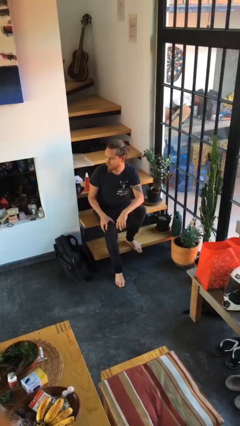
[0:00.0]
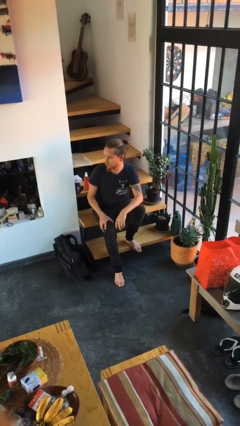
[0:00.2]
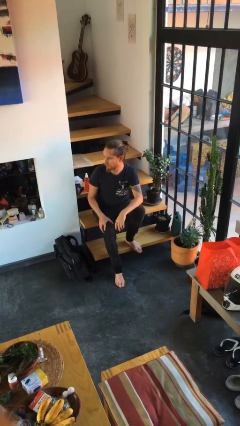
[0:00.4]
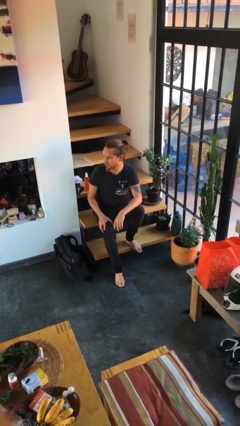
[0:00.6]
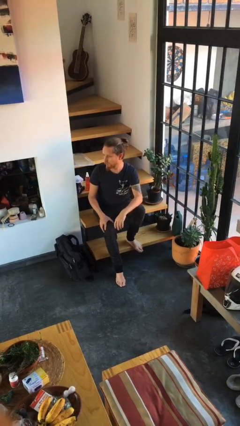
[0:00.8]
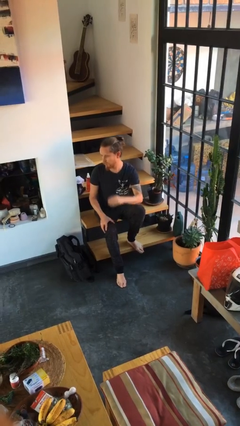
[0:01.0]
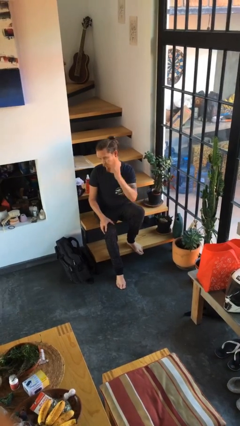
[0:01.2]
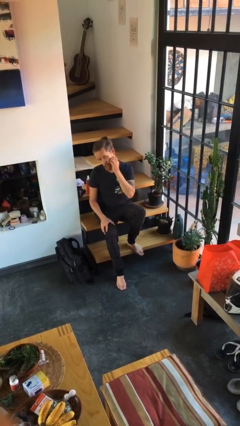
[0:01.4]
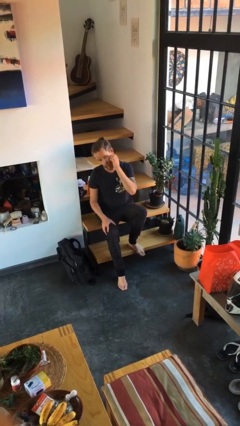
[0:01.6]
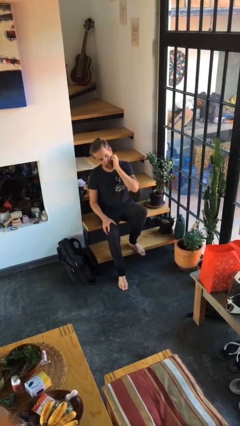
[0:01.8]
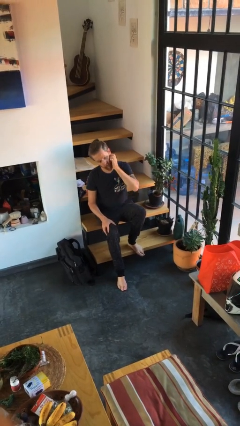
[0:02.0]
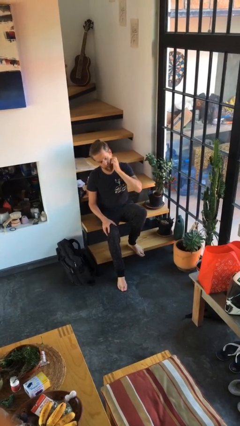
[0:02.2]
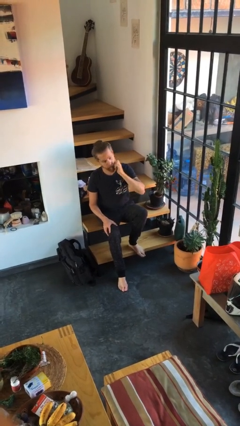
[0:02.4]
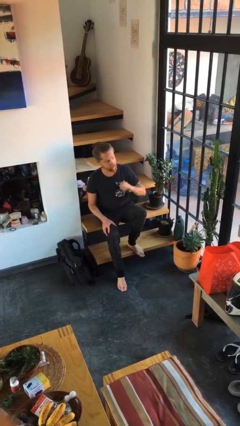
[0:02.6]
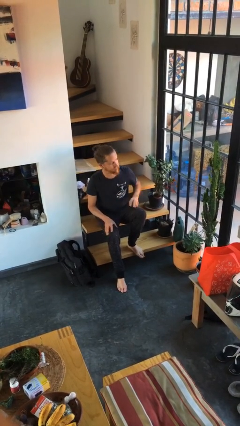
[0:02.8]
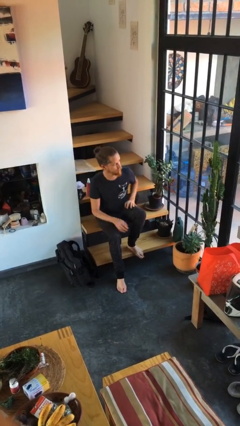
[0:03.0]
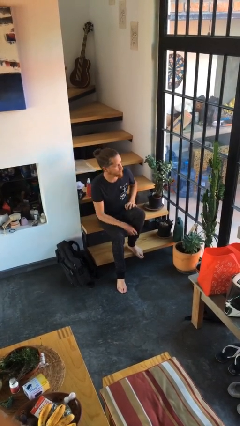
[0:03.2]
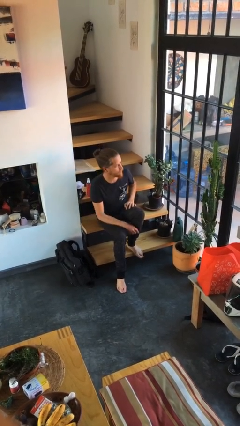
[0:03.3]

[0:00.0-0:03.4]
person scratches face

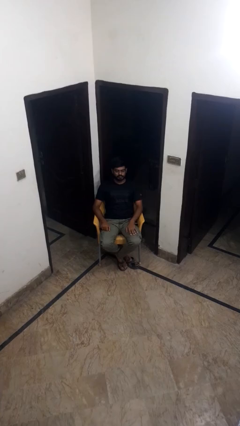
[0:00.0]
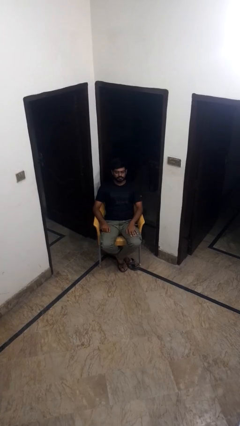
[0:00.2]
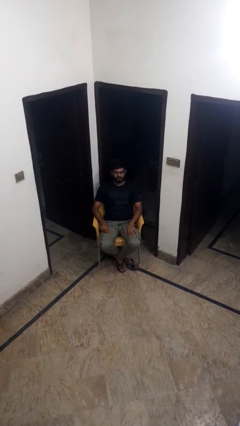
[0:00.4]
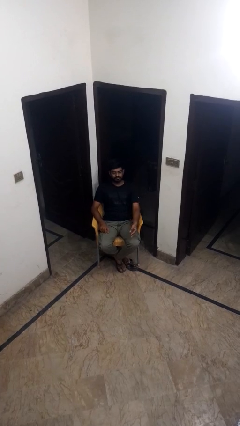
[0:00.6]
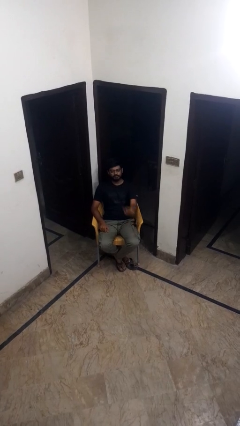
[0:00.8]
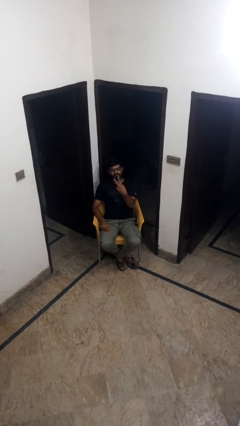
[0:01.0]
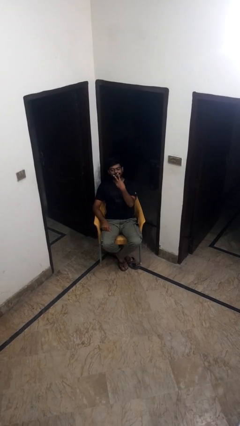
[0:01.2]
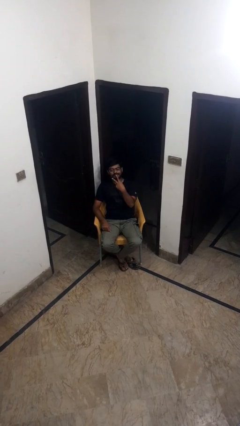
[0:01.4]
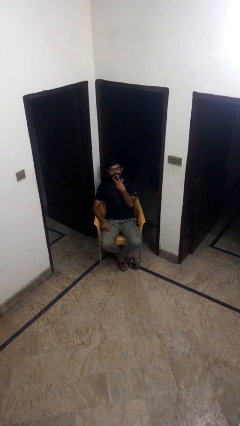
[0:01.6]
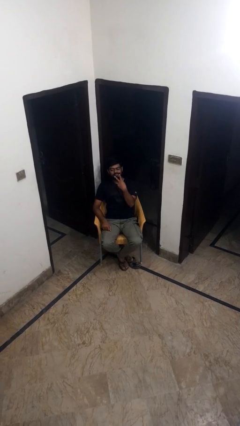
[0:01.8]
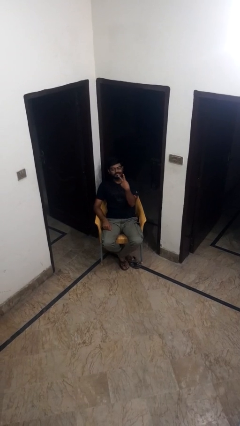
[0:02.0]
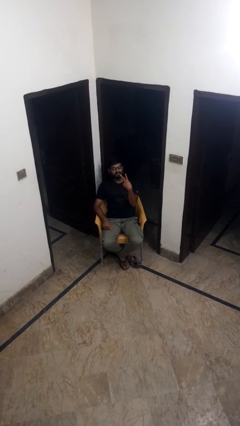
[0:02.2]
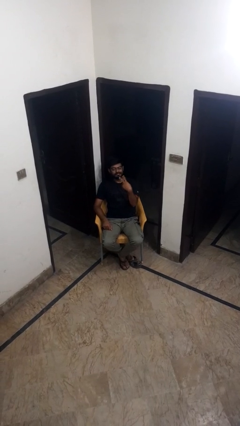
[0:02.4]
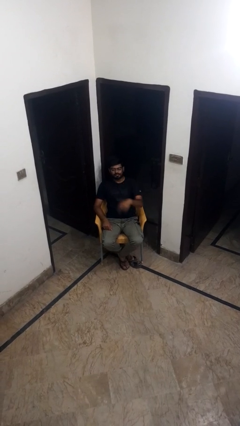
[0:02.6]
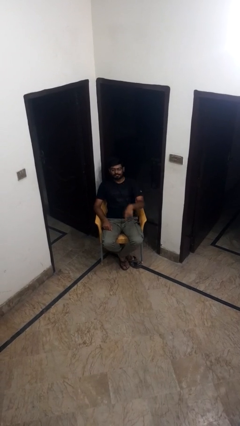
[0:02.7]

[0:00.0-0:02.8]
person gestures peace

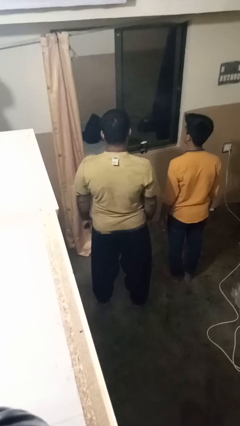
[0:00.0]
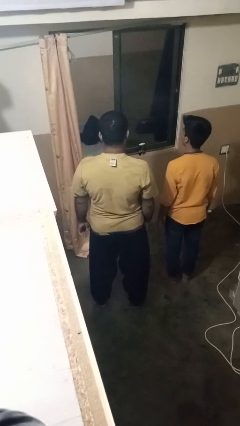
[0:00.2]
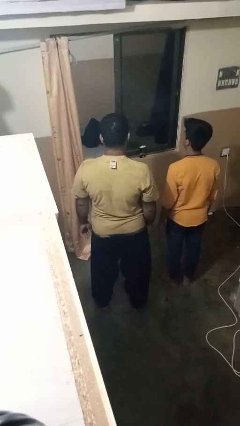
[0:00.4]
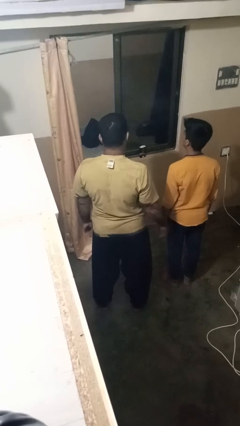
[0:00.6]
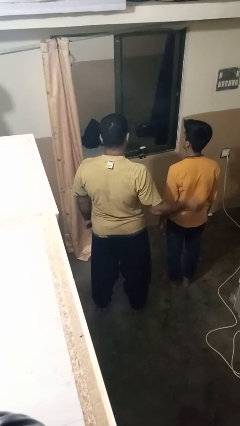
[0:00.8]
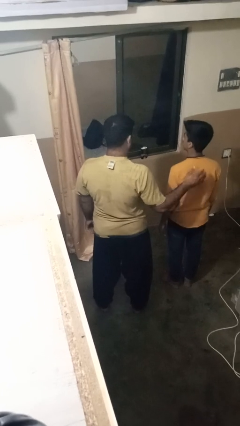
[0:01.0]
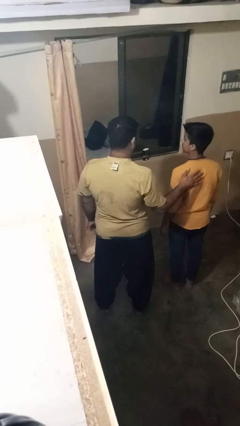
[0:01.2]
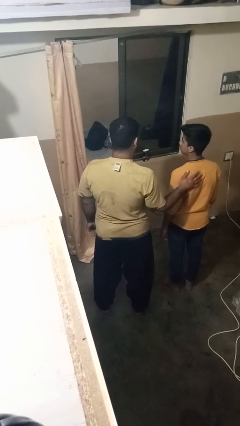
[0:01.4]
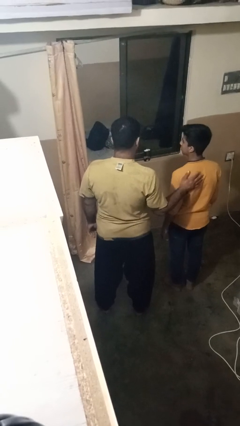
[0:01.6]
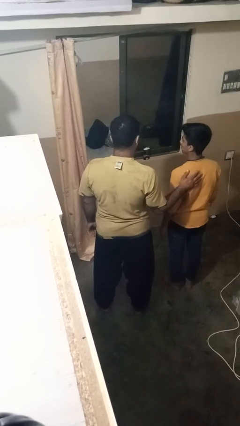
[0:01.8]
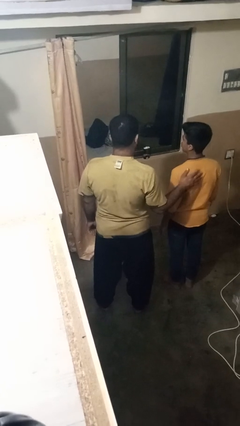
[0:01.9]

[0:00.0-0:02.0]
person touches back of person

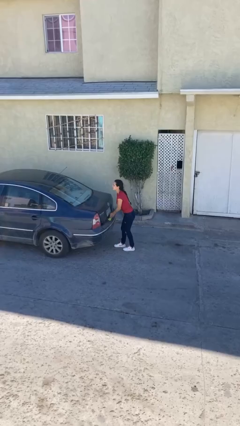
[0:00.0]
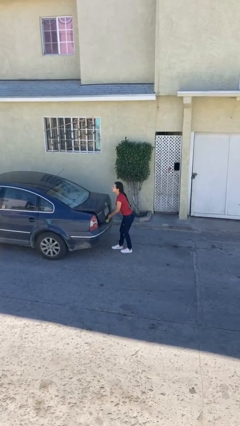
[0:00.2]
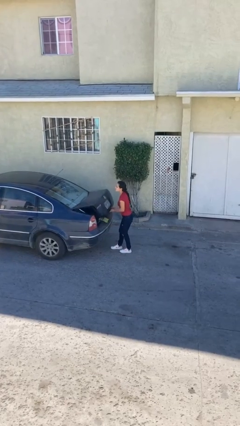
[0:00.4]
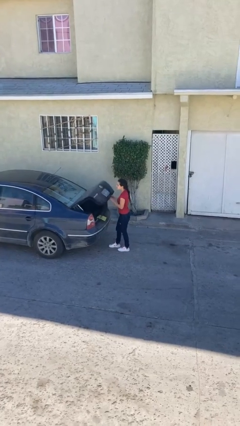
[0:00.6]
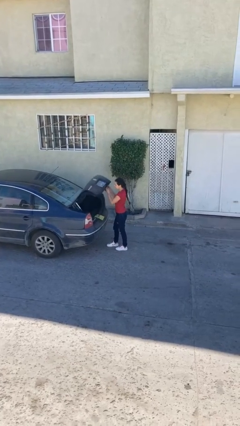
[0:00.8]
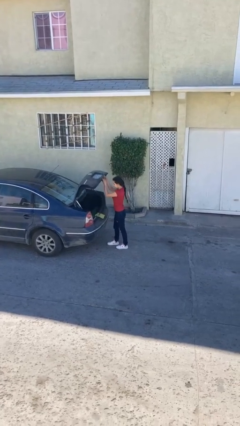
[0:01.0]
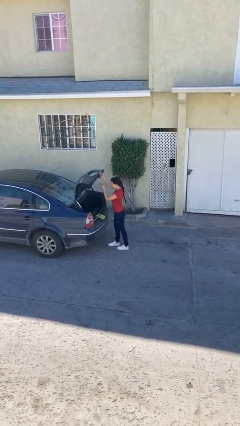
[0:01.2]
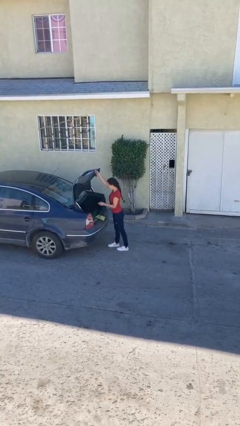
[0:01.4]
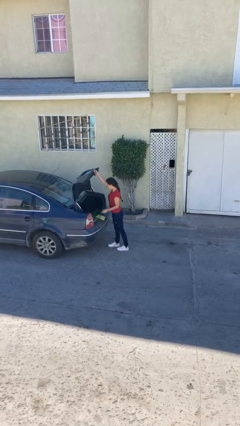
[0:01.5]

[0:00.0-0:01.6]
person opens car trunk

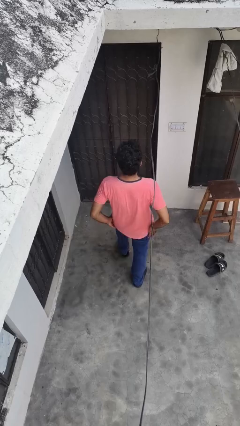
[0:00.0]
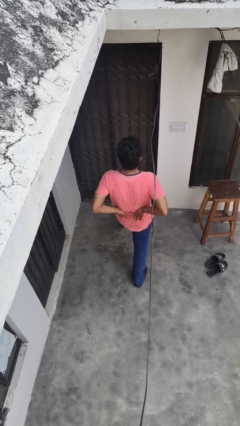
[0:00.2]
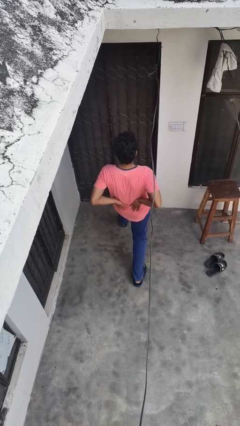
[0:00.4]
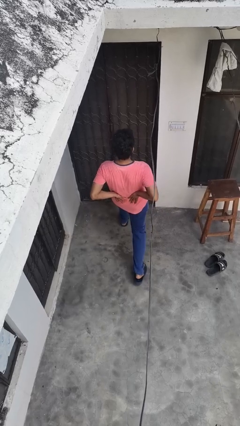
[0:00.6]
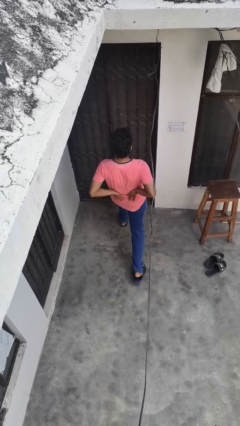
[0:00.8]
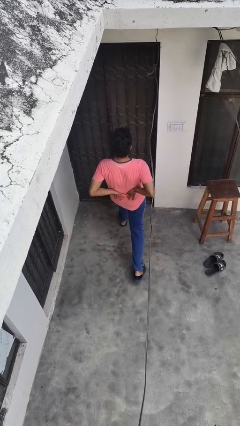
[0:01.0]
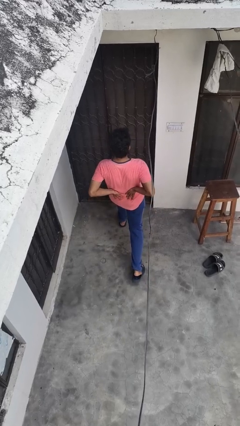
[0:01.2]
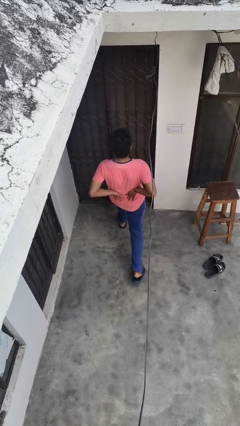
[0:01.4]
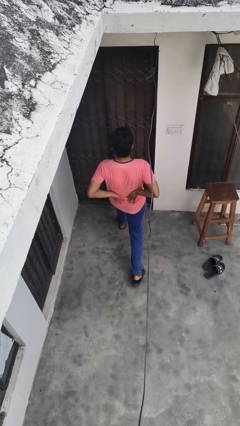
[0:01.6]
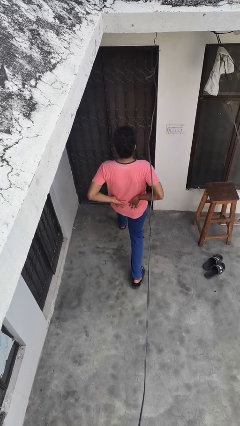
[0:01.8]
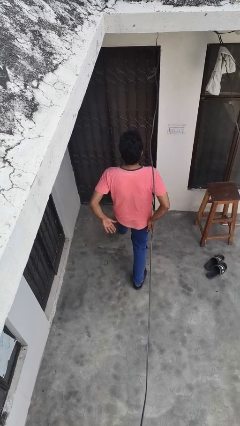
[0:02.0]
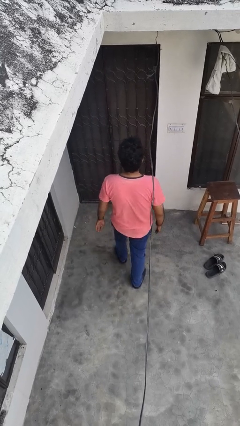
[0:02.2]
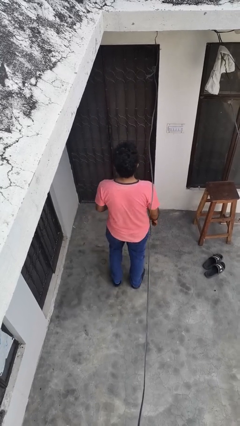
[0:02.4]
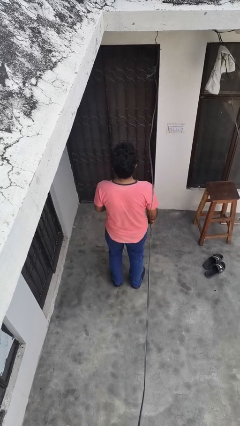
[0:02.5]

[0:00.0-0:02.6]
person exercises with lunges

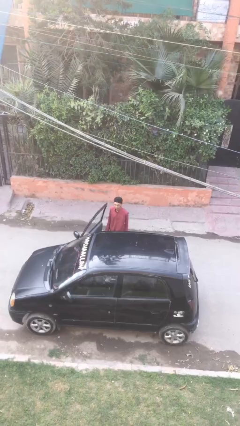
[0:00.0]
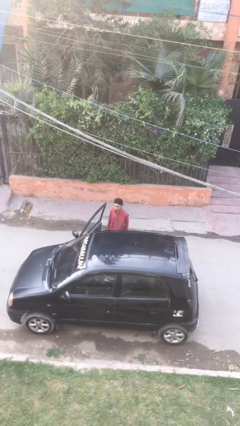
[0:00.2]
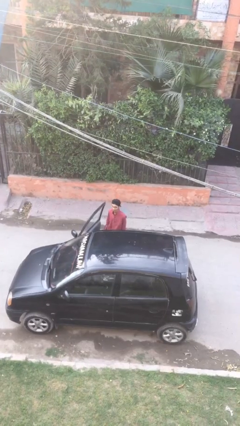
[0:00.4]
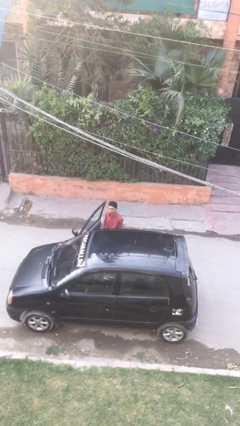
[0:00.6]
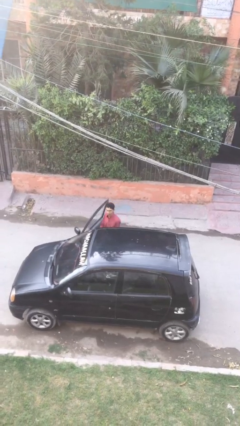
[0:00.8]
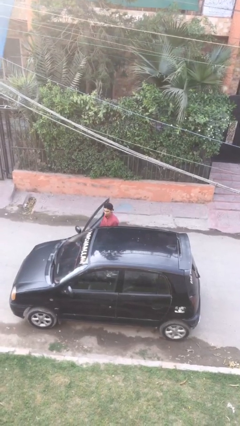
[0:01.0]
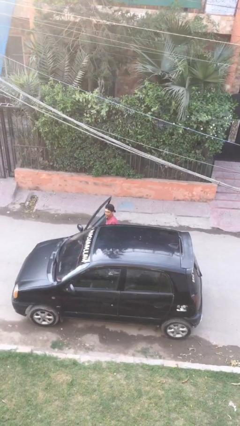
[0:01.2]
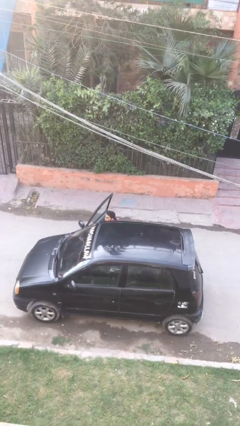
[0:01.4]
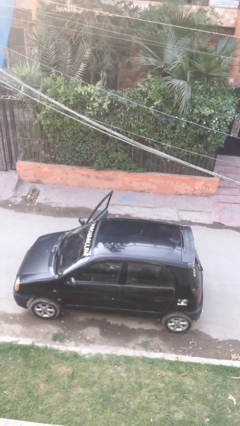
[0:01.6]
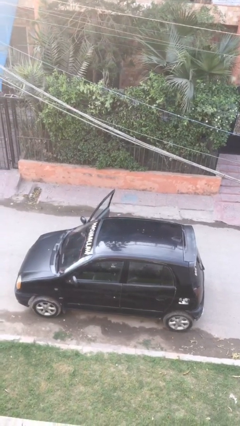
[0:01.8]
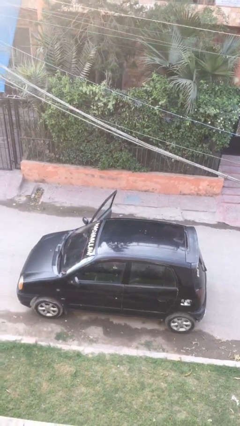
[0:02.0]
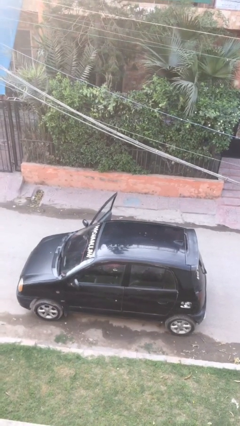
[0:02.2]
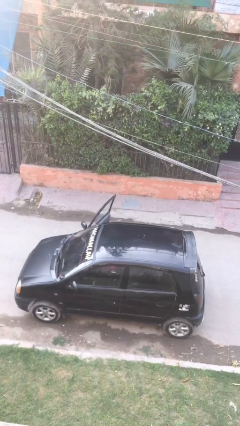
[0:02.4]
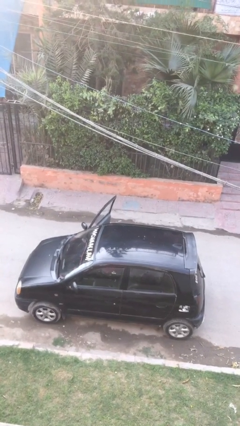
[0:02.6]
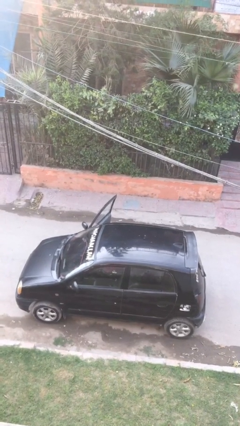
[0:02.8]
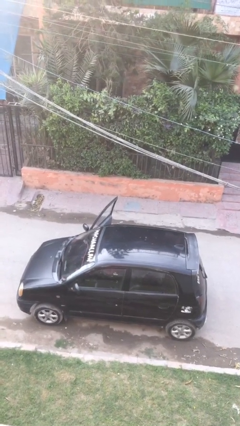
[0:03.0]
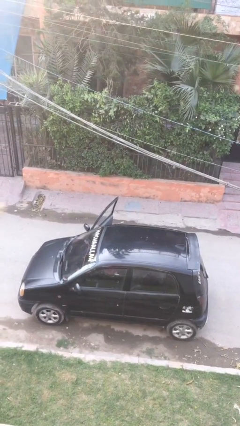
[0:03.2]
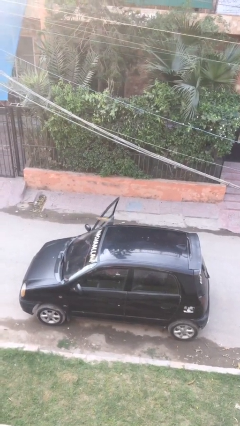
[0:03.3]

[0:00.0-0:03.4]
person enters car

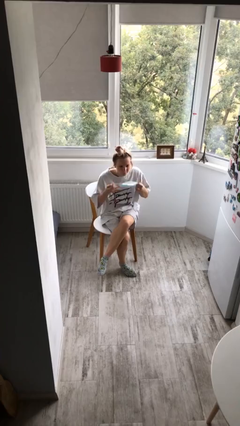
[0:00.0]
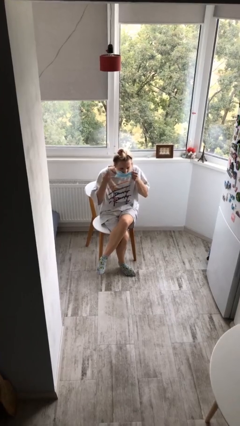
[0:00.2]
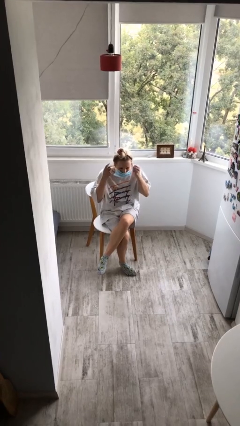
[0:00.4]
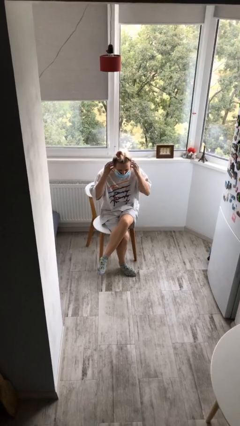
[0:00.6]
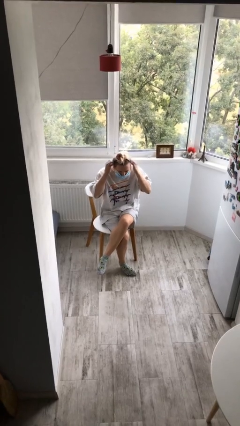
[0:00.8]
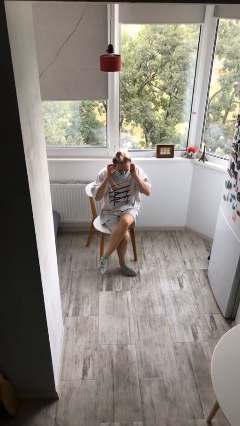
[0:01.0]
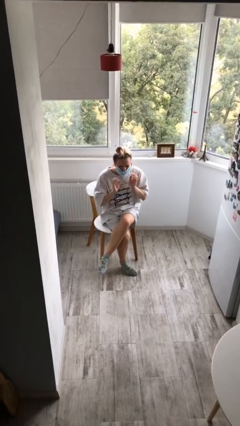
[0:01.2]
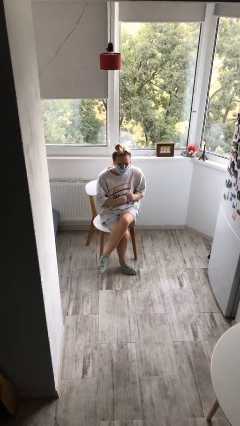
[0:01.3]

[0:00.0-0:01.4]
person puts on facemask
